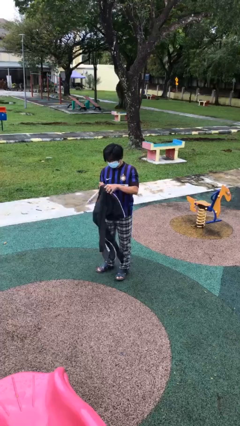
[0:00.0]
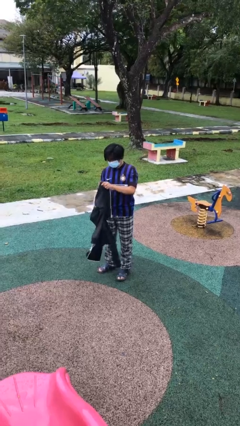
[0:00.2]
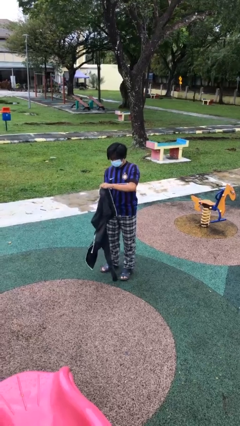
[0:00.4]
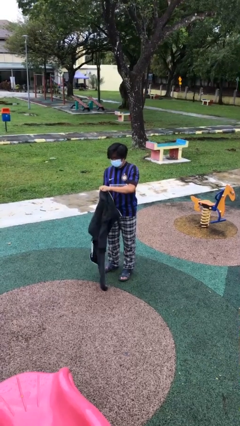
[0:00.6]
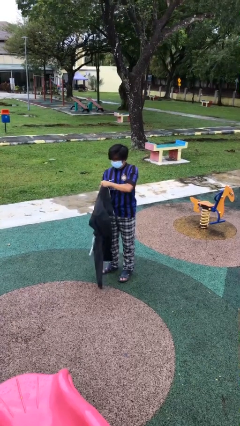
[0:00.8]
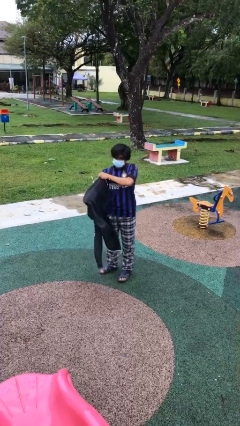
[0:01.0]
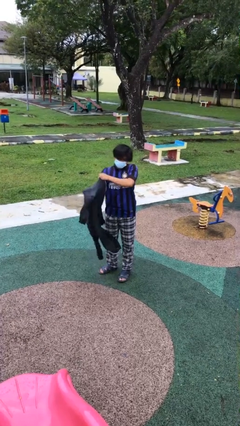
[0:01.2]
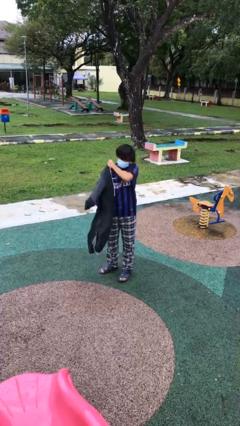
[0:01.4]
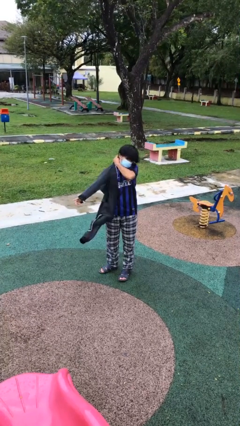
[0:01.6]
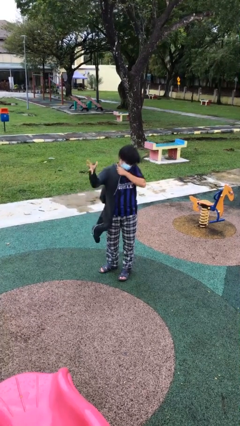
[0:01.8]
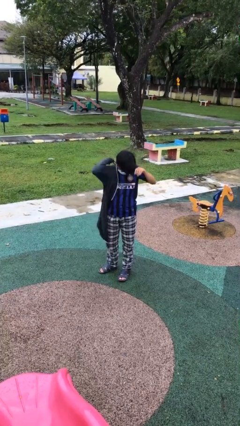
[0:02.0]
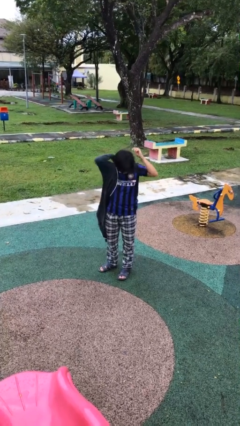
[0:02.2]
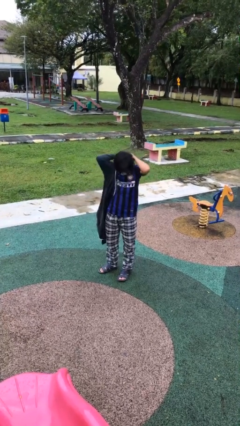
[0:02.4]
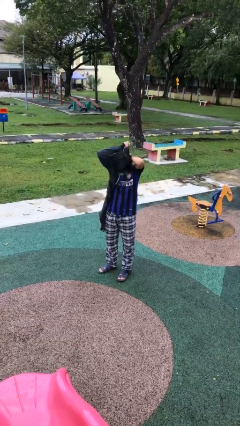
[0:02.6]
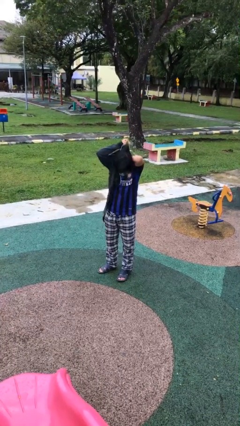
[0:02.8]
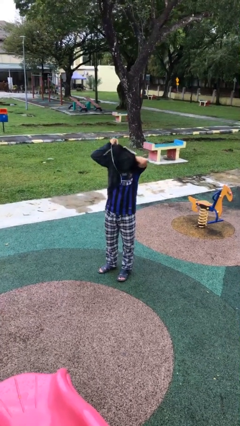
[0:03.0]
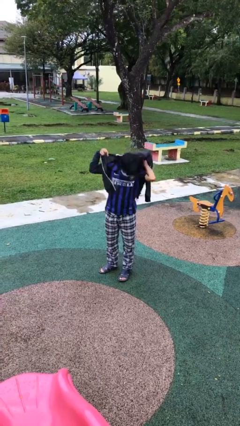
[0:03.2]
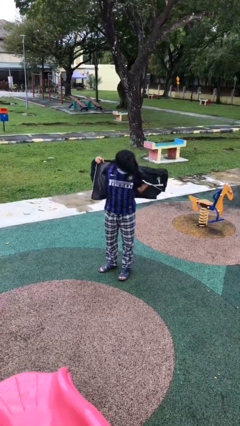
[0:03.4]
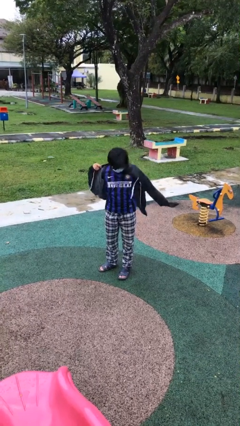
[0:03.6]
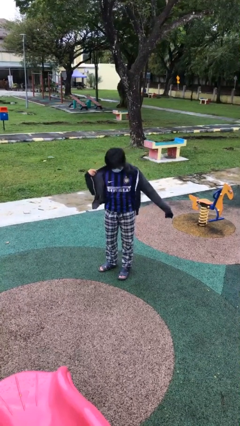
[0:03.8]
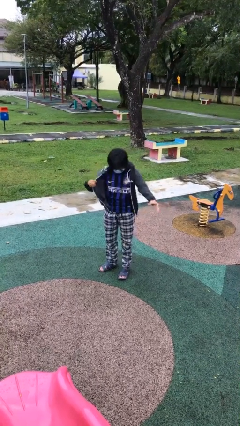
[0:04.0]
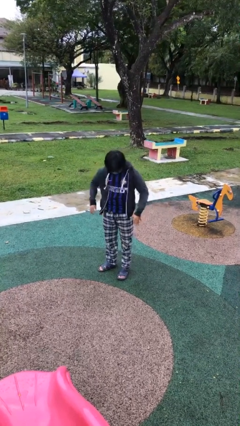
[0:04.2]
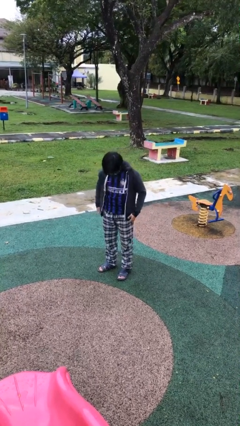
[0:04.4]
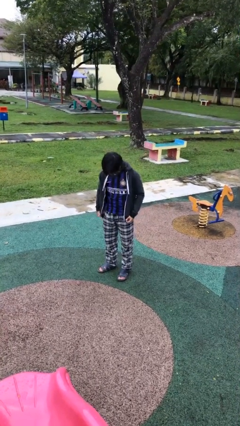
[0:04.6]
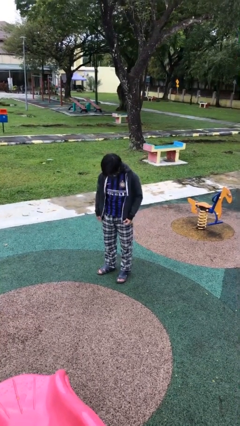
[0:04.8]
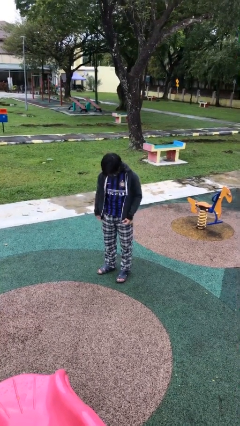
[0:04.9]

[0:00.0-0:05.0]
person puts on jacket

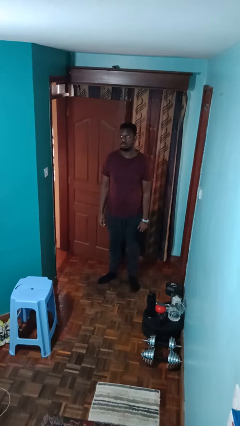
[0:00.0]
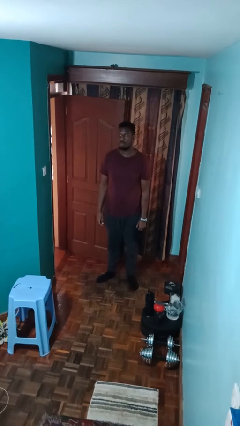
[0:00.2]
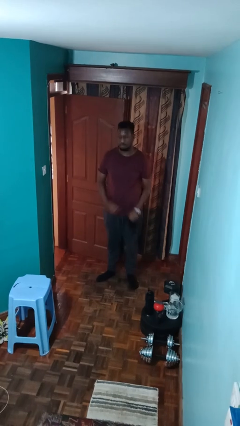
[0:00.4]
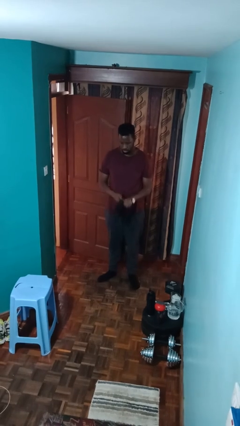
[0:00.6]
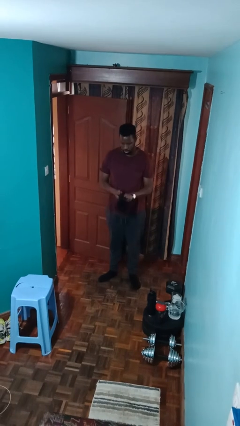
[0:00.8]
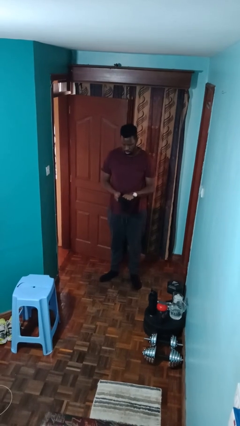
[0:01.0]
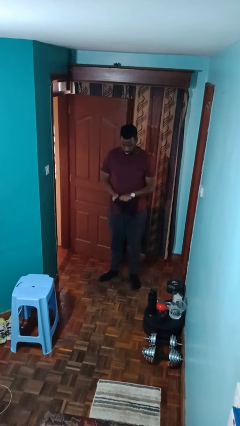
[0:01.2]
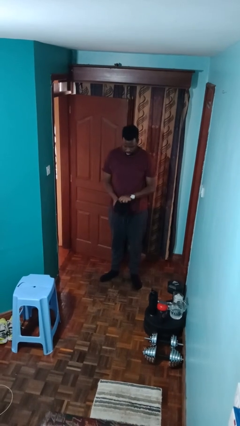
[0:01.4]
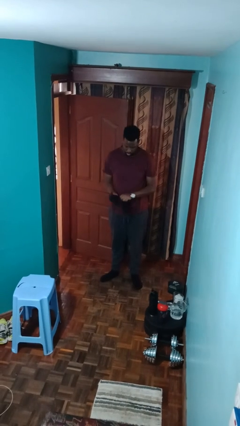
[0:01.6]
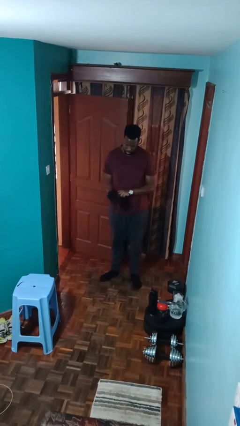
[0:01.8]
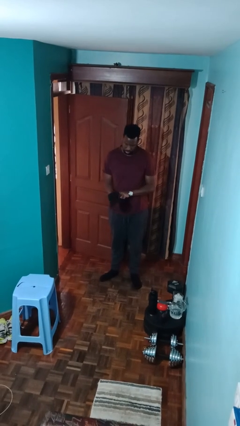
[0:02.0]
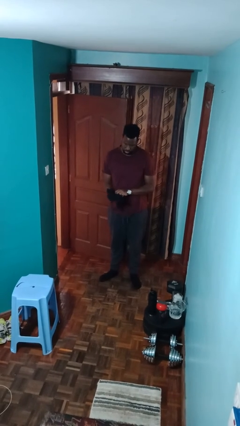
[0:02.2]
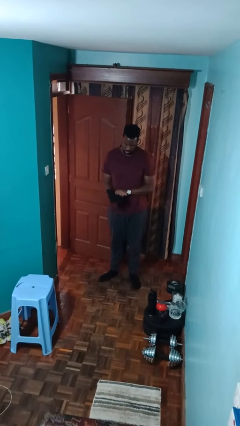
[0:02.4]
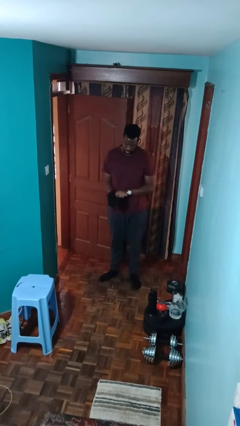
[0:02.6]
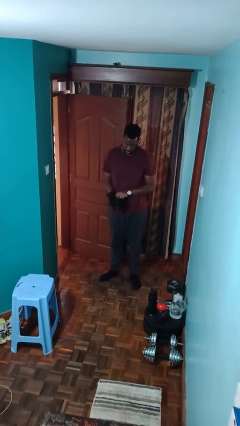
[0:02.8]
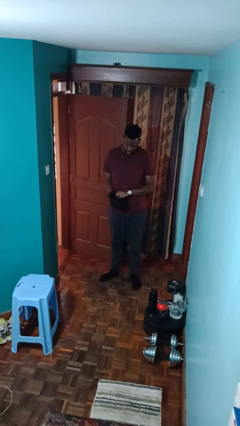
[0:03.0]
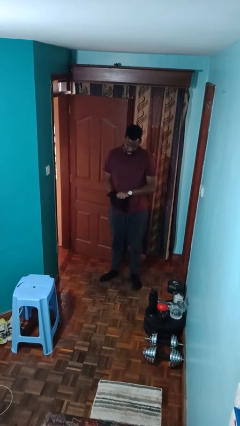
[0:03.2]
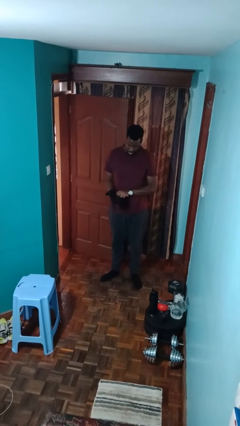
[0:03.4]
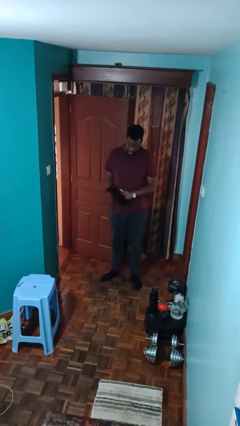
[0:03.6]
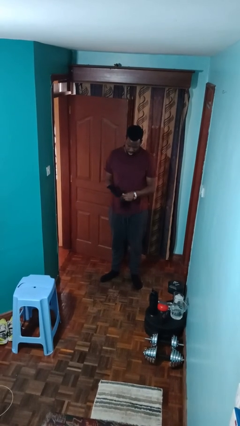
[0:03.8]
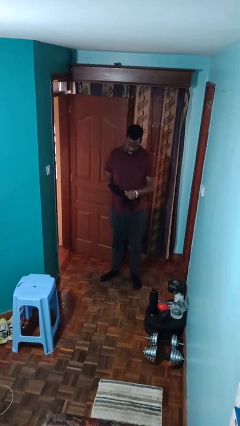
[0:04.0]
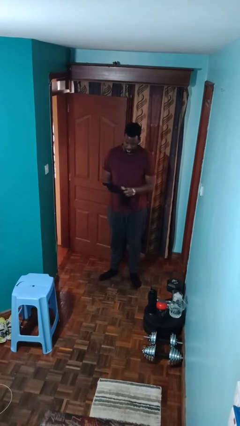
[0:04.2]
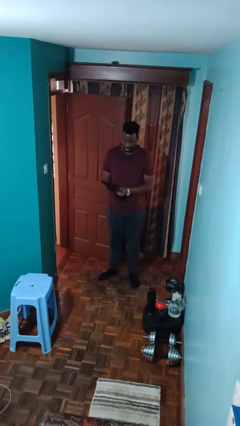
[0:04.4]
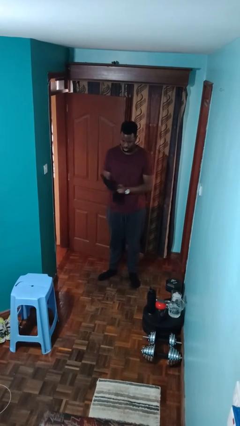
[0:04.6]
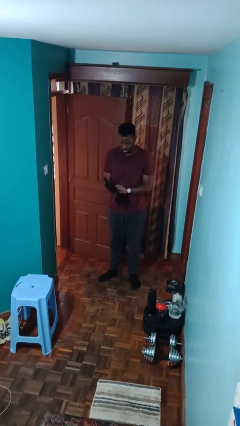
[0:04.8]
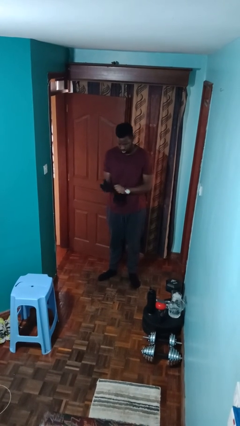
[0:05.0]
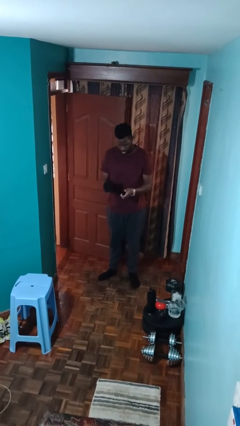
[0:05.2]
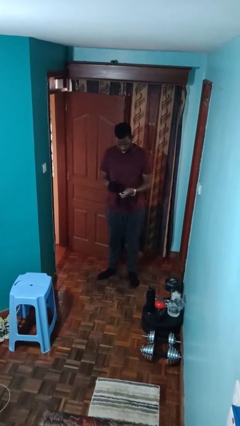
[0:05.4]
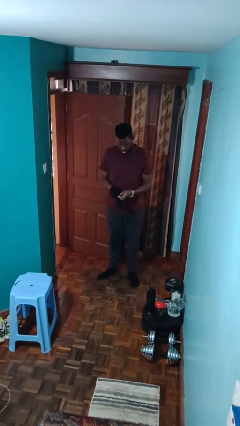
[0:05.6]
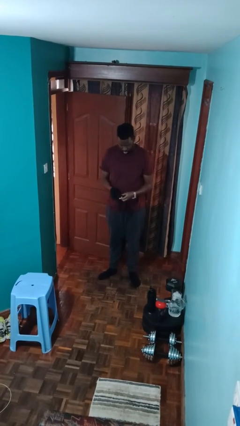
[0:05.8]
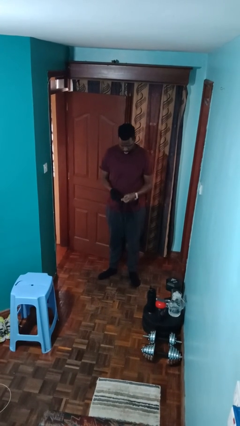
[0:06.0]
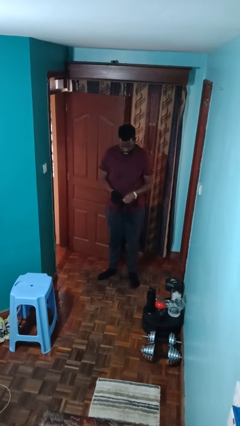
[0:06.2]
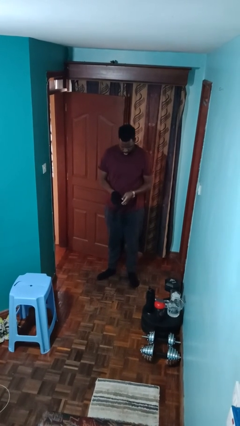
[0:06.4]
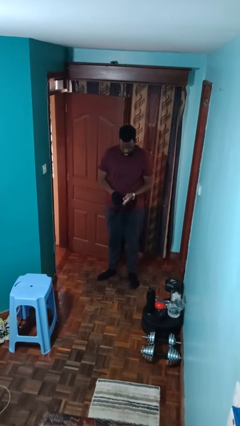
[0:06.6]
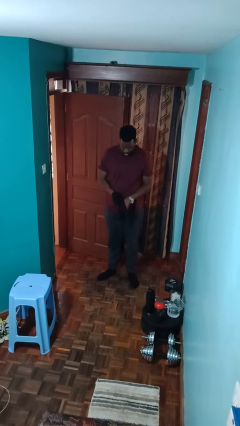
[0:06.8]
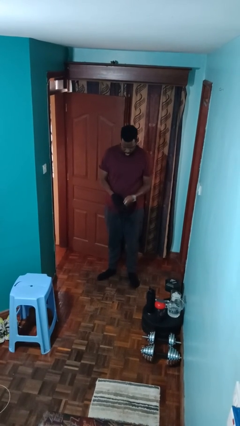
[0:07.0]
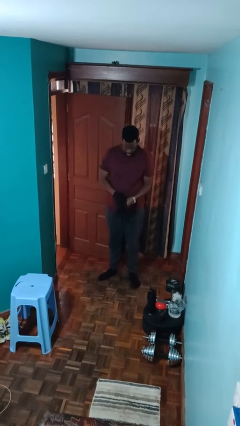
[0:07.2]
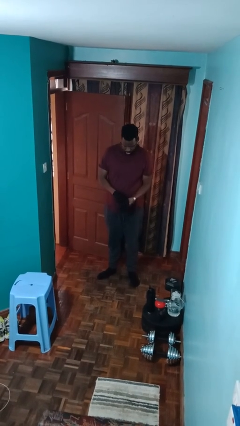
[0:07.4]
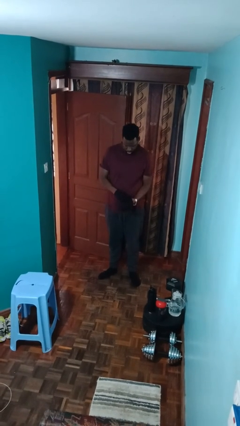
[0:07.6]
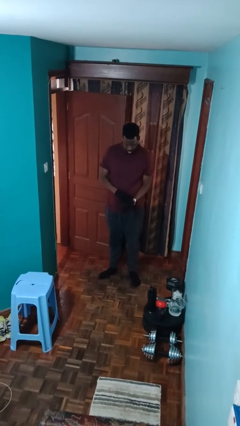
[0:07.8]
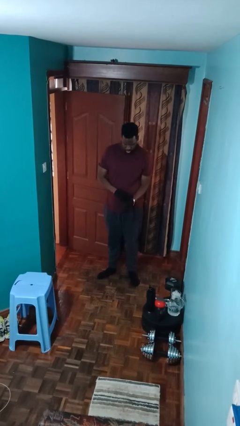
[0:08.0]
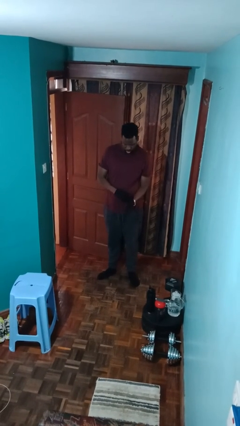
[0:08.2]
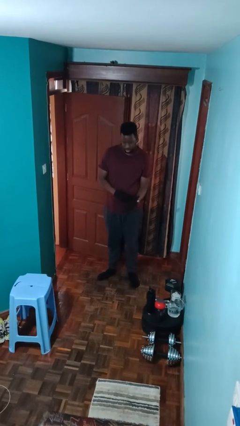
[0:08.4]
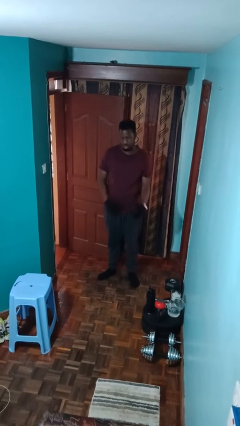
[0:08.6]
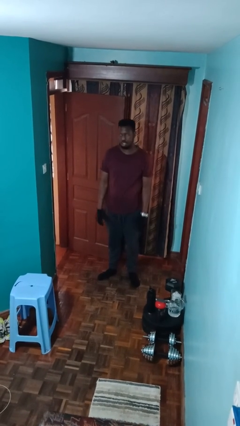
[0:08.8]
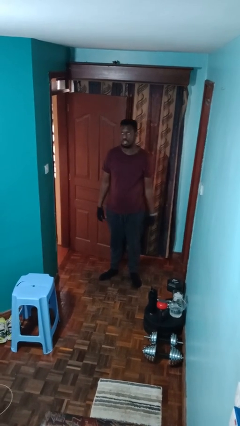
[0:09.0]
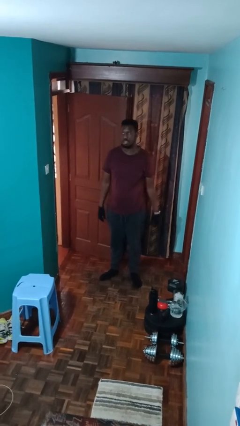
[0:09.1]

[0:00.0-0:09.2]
person puts on gloves

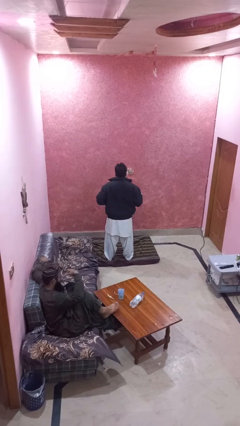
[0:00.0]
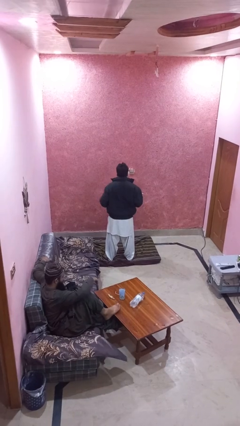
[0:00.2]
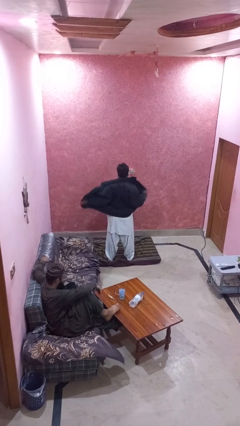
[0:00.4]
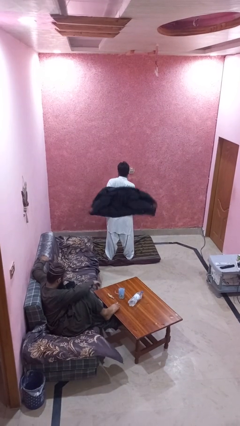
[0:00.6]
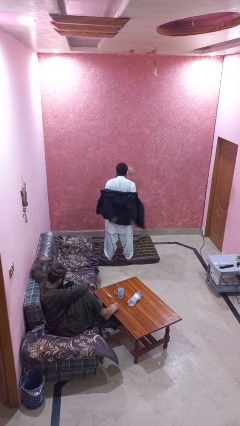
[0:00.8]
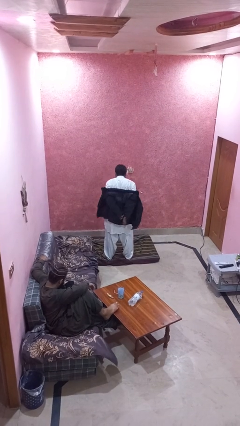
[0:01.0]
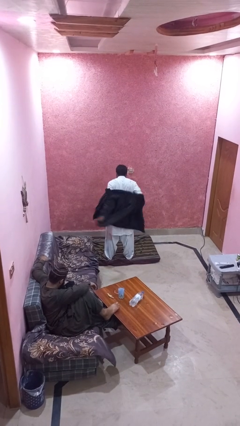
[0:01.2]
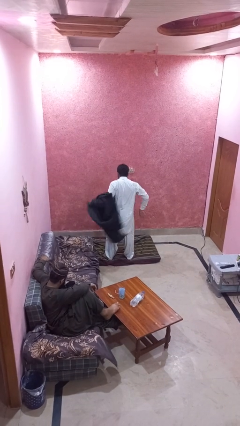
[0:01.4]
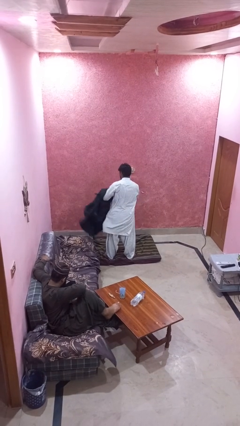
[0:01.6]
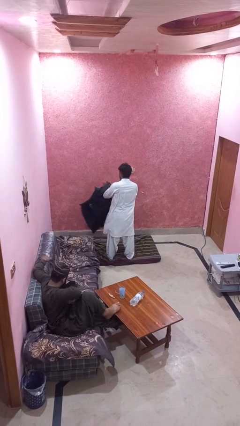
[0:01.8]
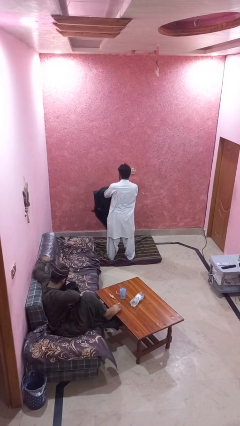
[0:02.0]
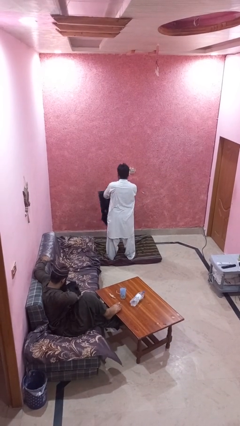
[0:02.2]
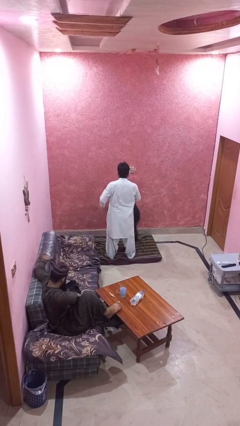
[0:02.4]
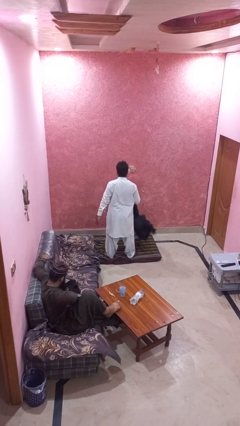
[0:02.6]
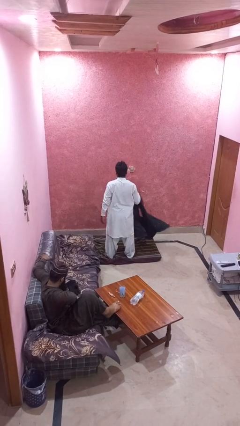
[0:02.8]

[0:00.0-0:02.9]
person takes off jacket

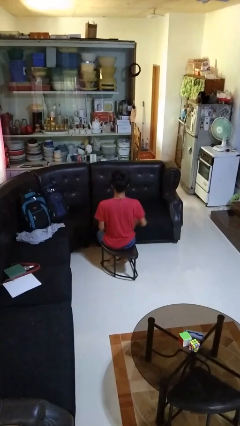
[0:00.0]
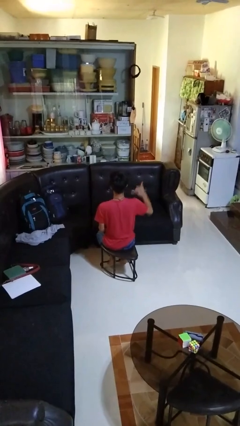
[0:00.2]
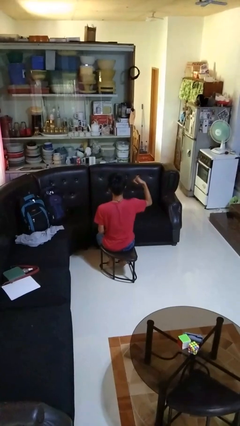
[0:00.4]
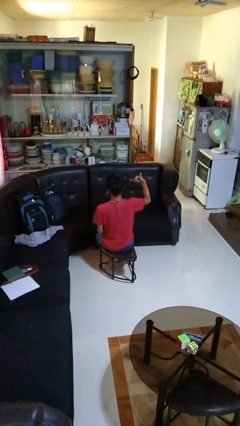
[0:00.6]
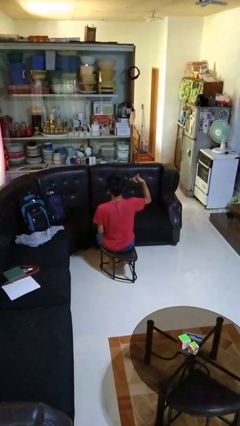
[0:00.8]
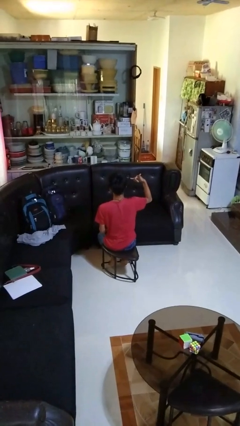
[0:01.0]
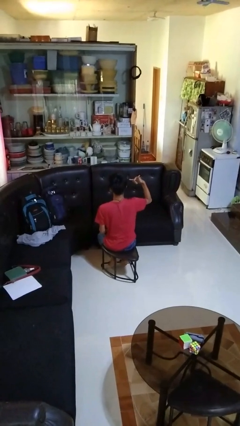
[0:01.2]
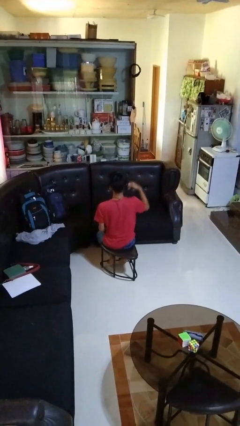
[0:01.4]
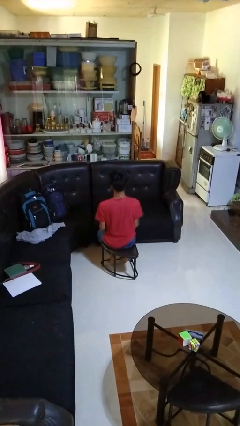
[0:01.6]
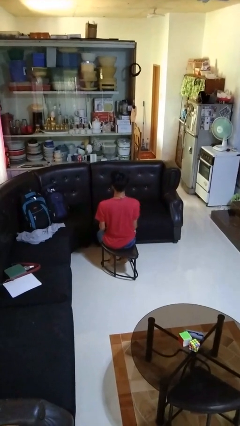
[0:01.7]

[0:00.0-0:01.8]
person gestures hang loose
